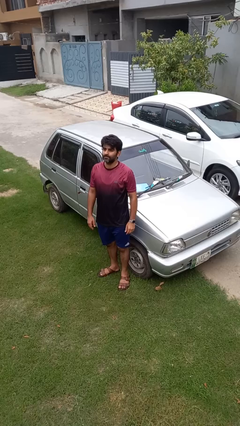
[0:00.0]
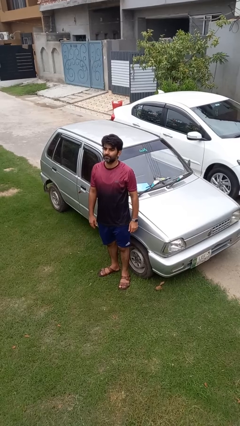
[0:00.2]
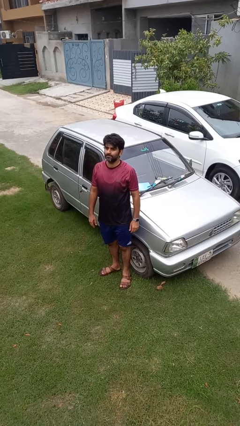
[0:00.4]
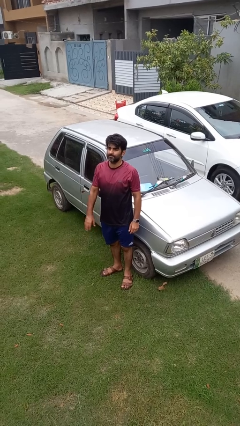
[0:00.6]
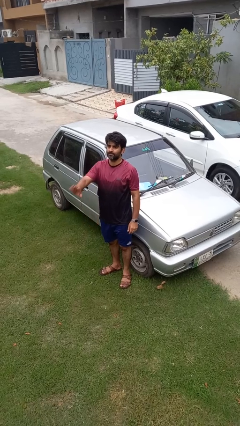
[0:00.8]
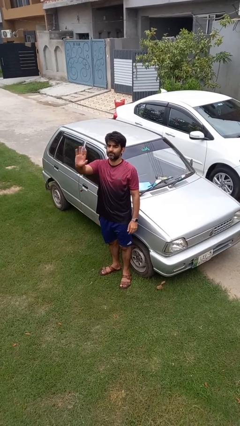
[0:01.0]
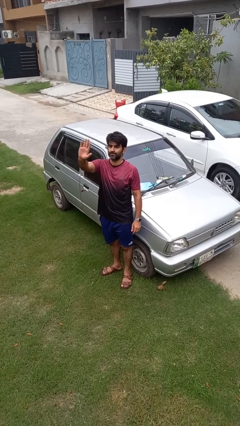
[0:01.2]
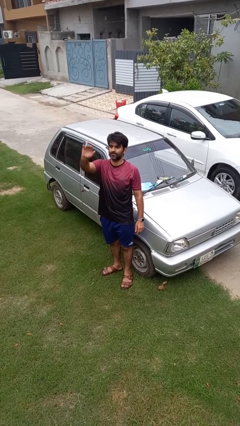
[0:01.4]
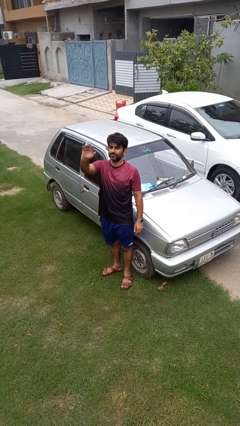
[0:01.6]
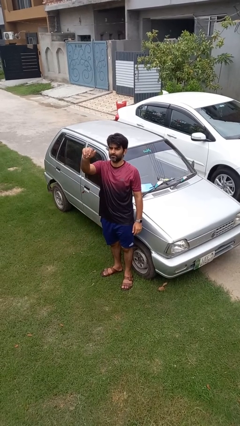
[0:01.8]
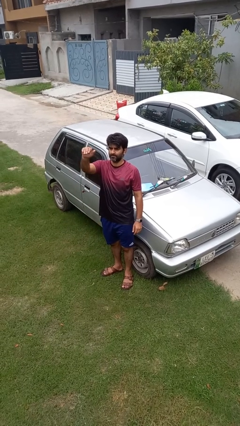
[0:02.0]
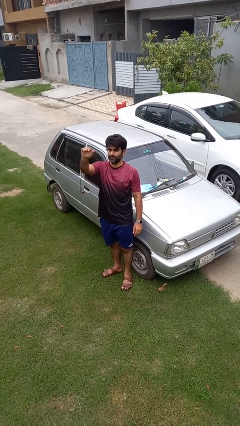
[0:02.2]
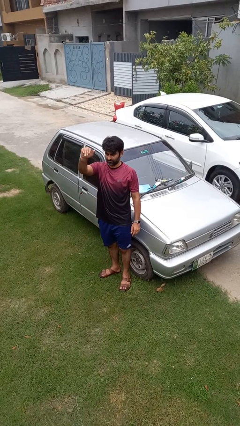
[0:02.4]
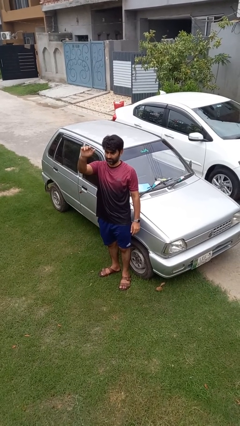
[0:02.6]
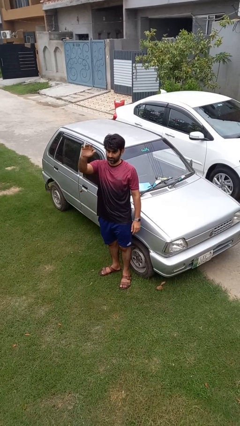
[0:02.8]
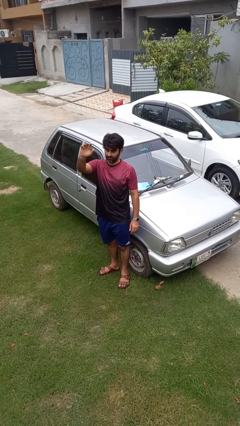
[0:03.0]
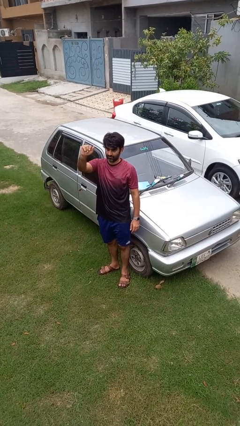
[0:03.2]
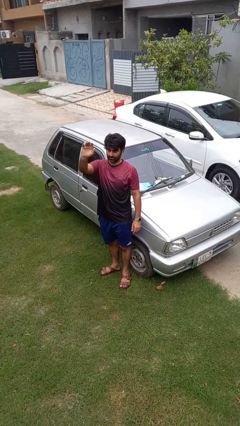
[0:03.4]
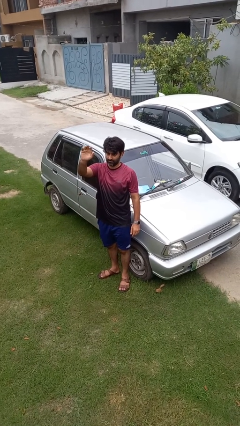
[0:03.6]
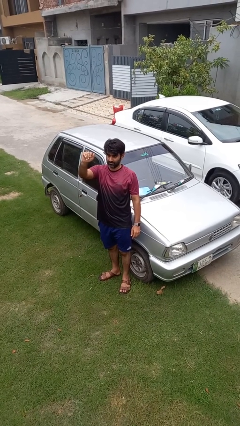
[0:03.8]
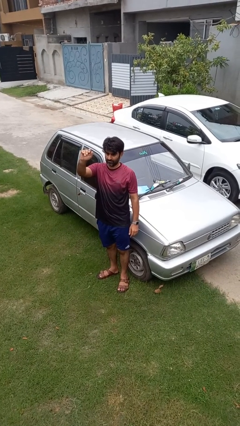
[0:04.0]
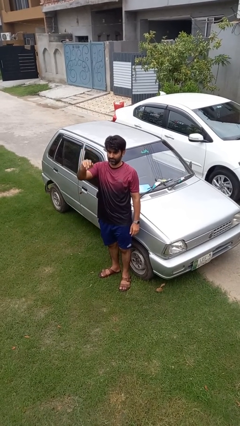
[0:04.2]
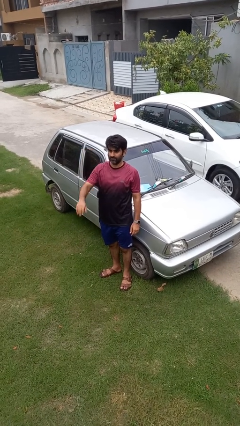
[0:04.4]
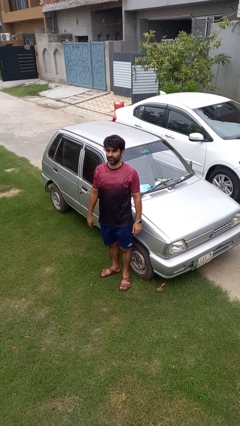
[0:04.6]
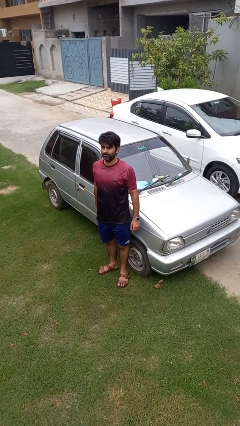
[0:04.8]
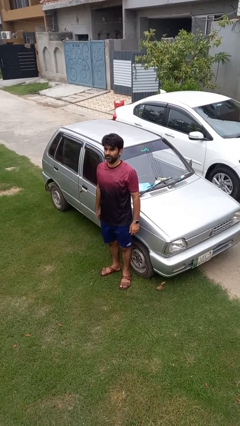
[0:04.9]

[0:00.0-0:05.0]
person gestures come here

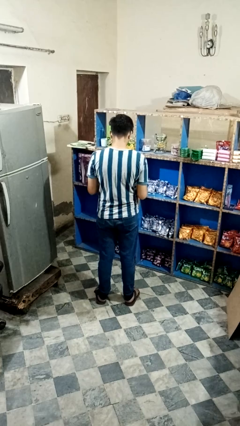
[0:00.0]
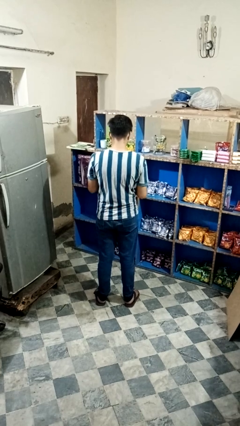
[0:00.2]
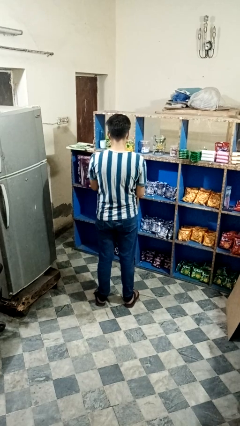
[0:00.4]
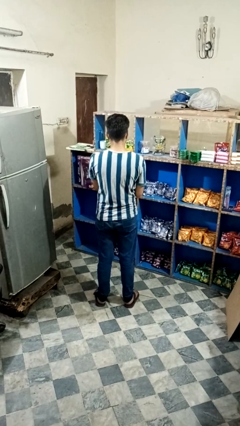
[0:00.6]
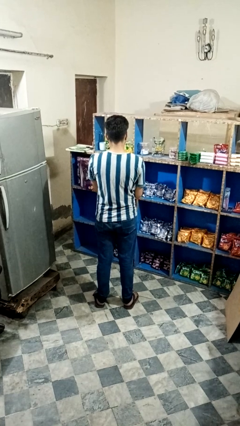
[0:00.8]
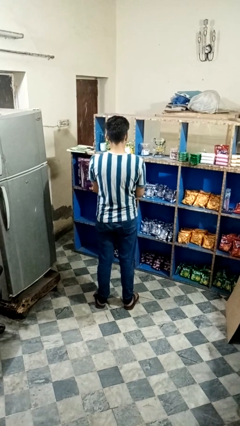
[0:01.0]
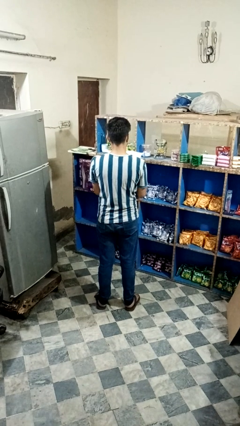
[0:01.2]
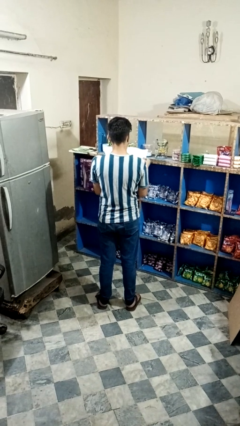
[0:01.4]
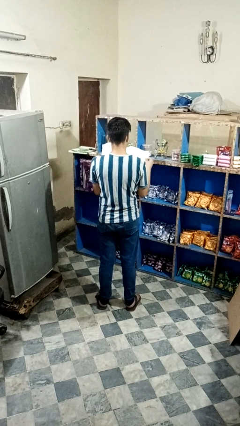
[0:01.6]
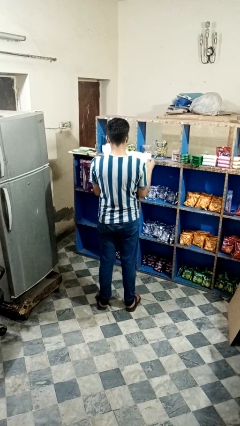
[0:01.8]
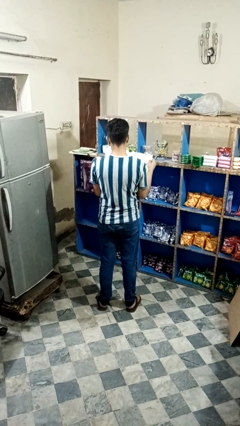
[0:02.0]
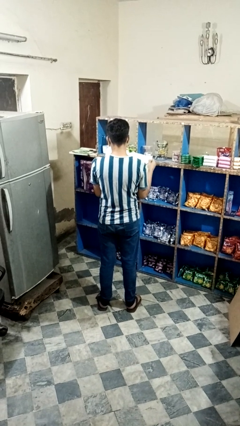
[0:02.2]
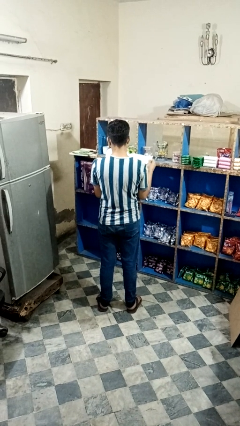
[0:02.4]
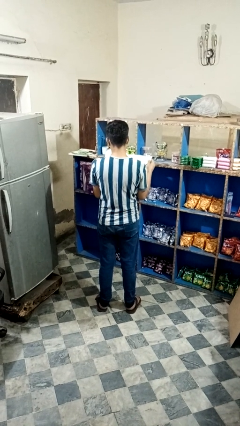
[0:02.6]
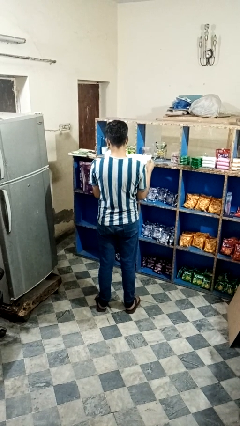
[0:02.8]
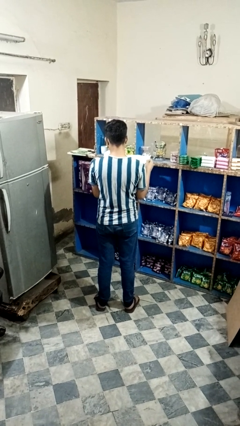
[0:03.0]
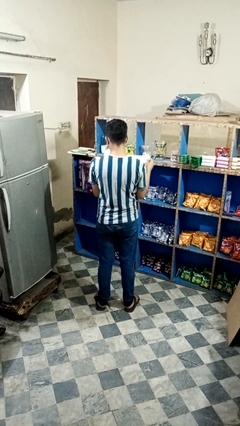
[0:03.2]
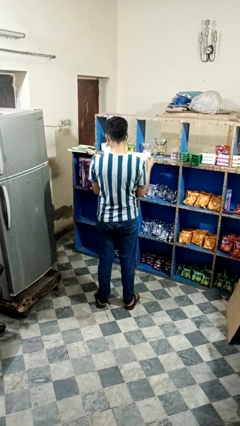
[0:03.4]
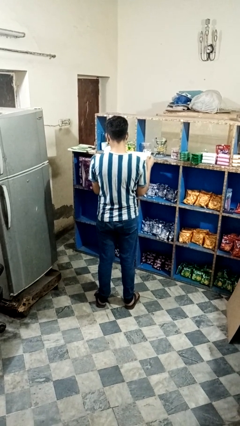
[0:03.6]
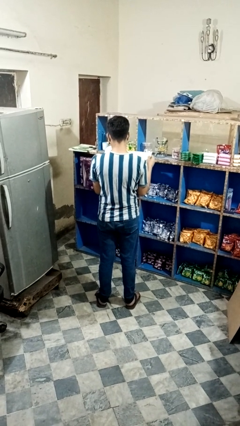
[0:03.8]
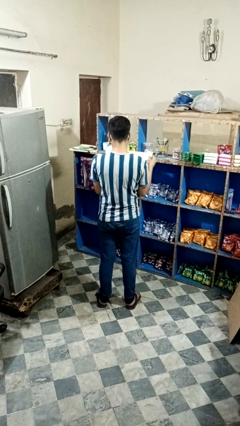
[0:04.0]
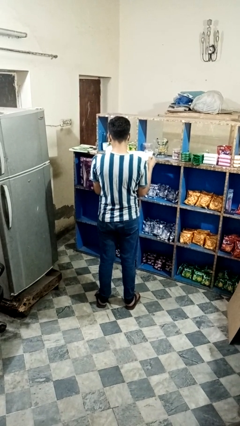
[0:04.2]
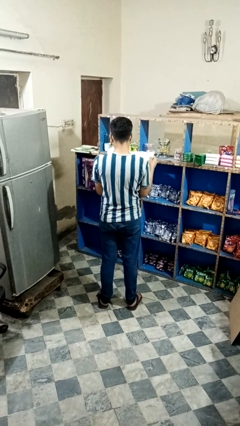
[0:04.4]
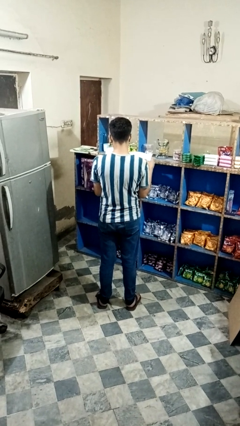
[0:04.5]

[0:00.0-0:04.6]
person reads newspaper

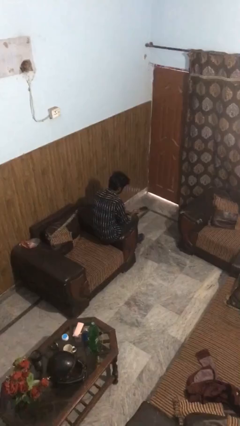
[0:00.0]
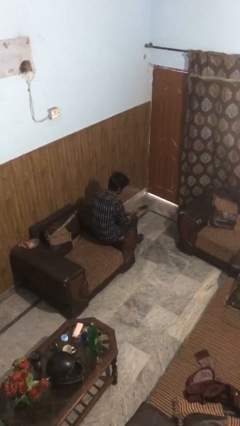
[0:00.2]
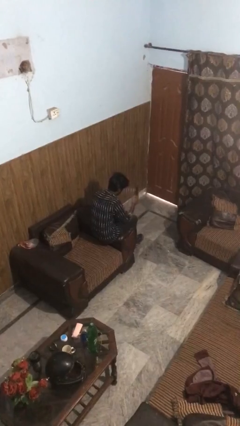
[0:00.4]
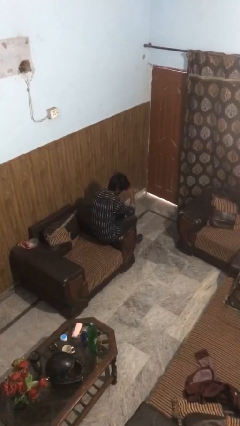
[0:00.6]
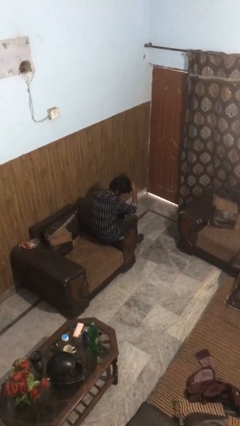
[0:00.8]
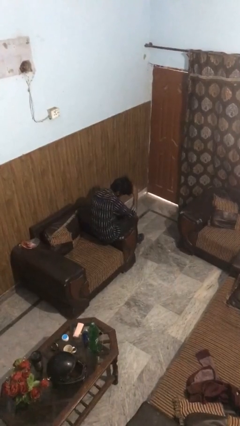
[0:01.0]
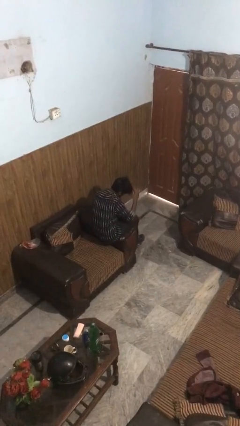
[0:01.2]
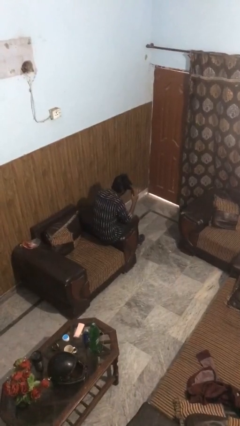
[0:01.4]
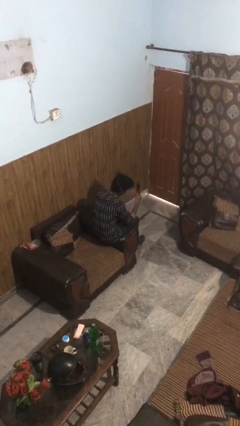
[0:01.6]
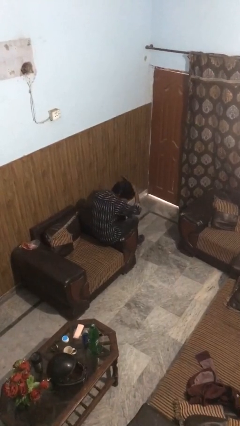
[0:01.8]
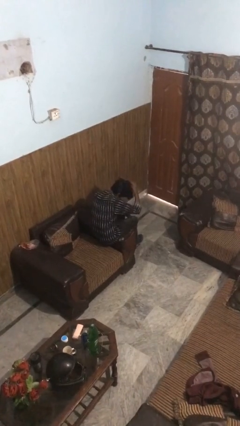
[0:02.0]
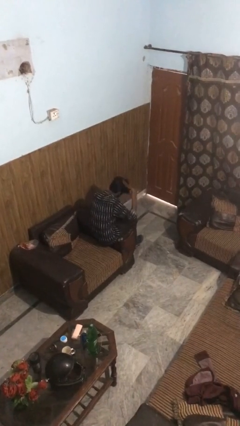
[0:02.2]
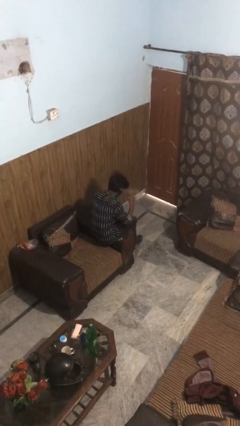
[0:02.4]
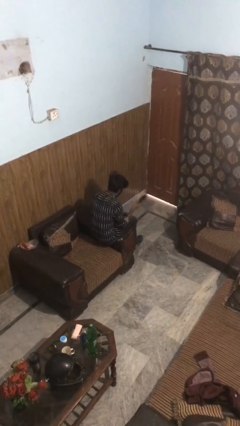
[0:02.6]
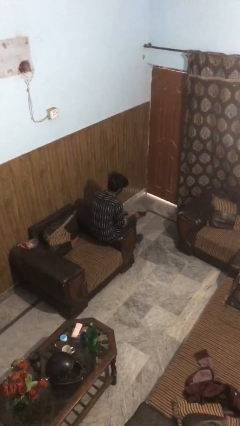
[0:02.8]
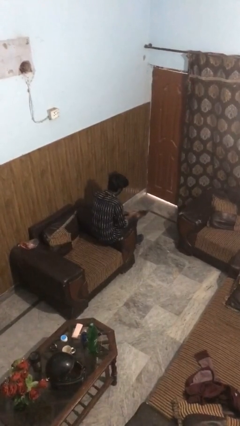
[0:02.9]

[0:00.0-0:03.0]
person brushes hair

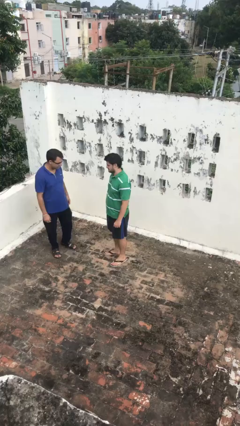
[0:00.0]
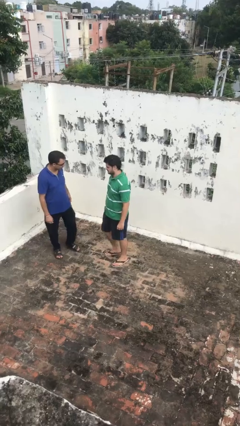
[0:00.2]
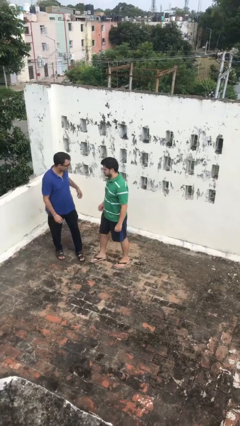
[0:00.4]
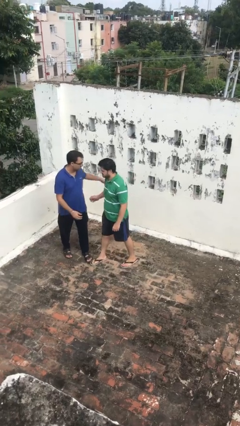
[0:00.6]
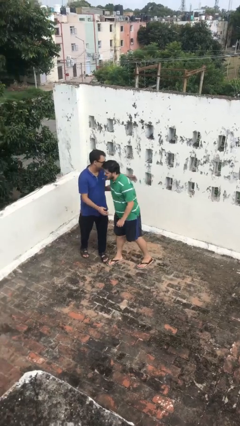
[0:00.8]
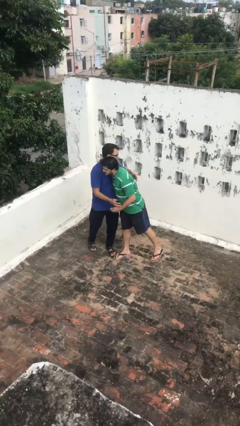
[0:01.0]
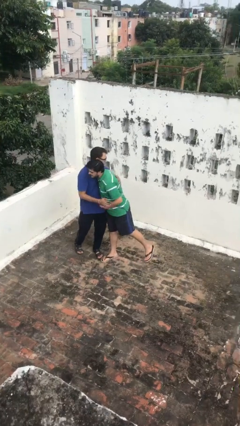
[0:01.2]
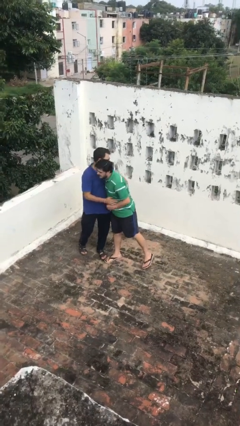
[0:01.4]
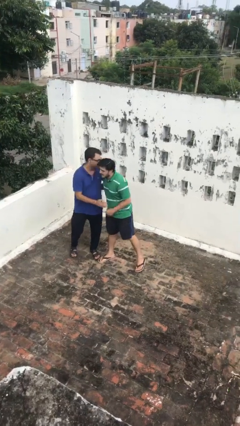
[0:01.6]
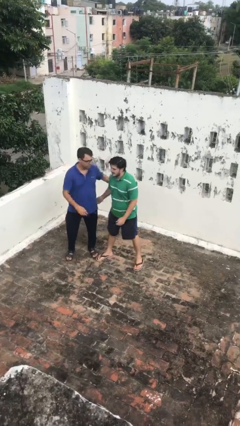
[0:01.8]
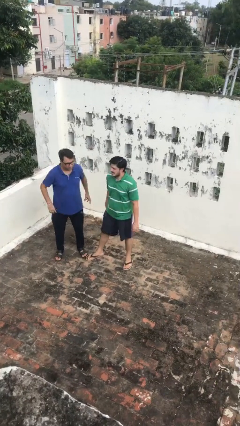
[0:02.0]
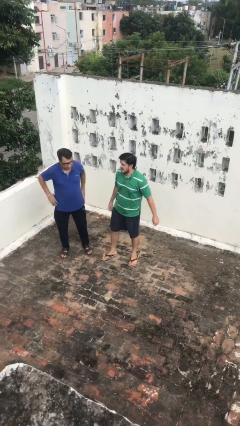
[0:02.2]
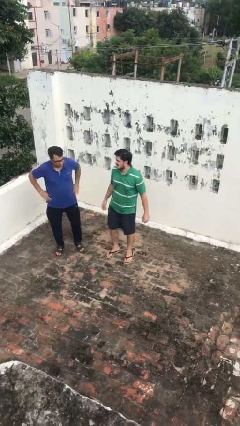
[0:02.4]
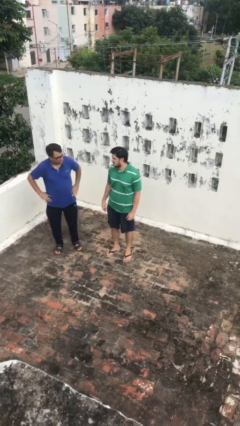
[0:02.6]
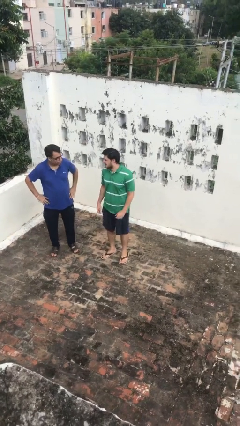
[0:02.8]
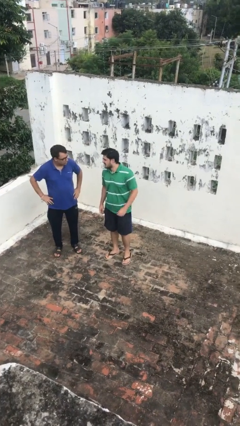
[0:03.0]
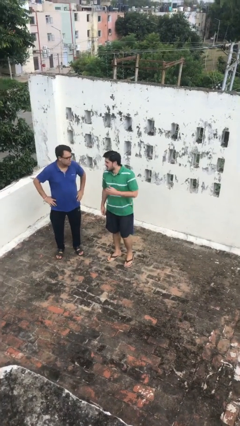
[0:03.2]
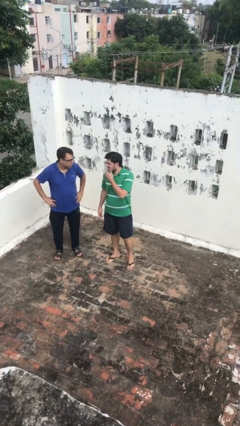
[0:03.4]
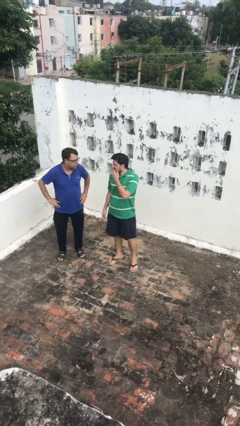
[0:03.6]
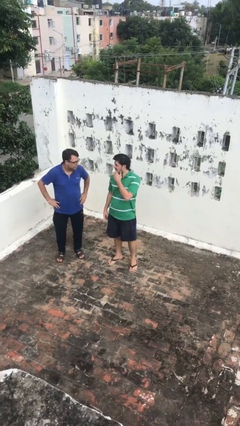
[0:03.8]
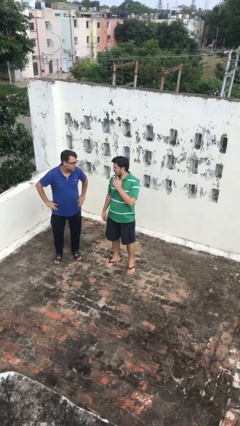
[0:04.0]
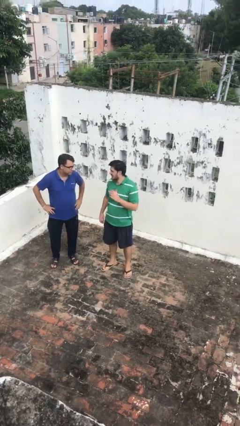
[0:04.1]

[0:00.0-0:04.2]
person embraces person

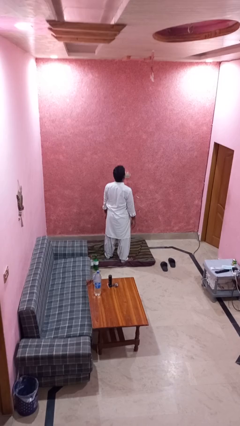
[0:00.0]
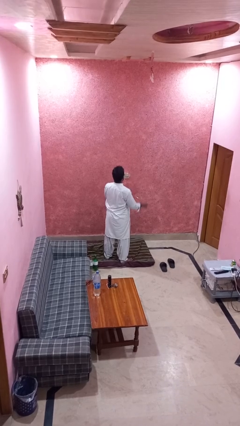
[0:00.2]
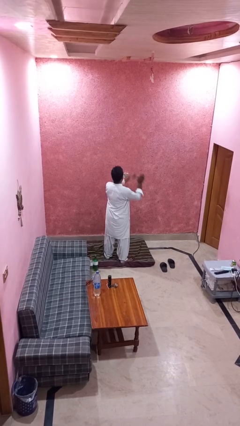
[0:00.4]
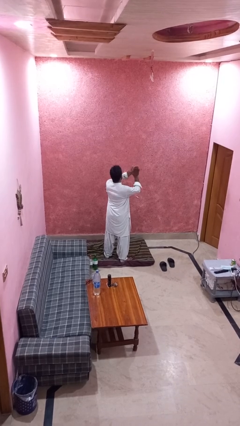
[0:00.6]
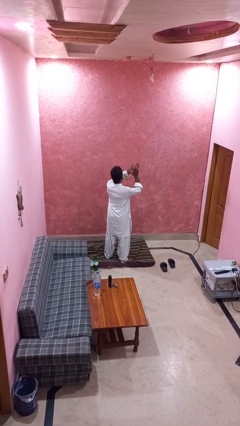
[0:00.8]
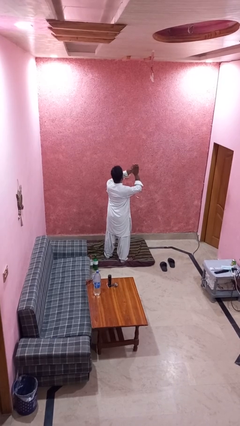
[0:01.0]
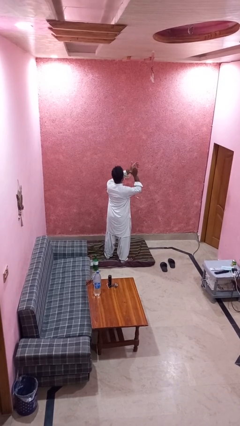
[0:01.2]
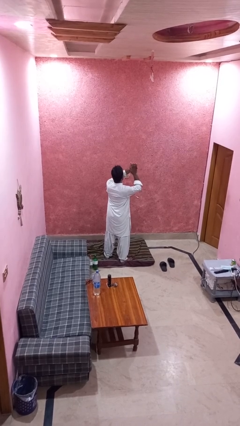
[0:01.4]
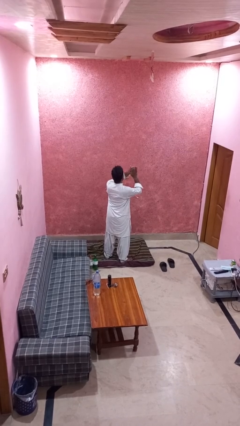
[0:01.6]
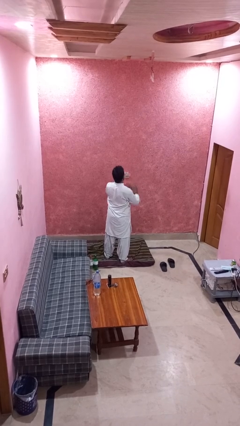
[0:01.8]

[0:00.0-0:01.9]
person claps hands
